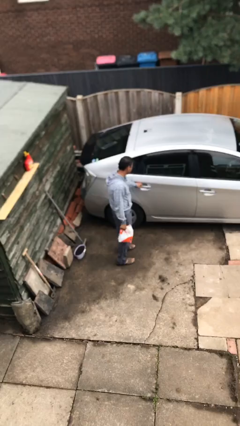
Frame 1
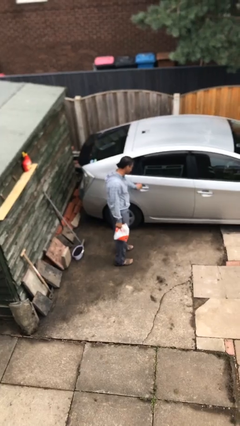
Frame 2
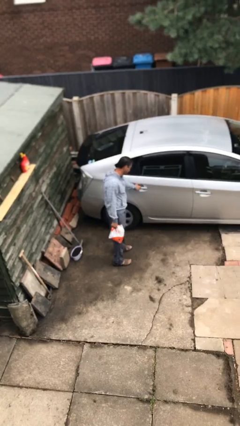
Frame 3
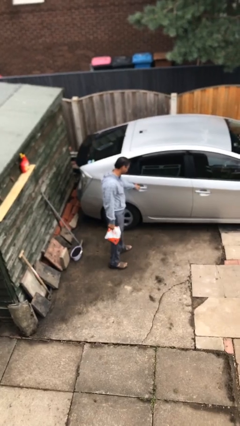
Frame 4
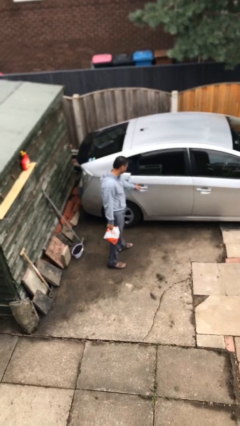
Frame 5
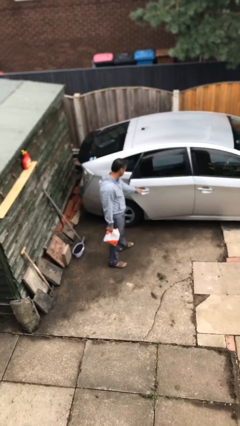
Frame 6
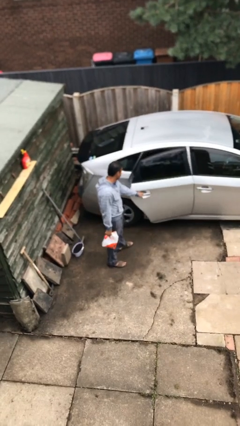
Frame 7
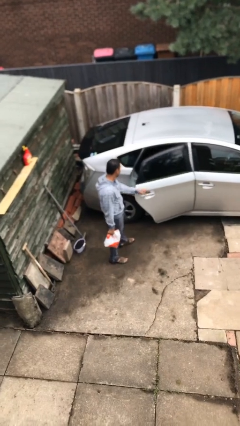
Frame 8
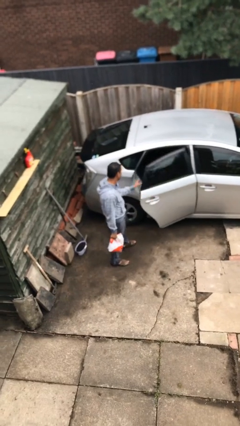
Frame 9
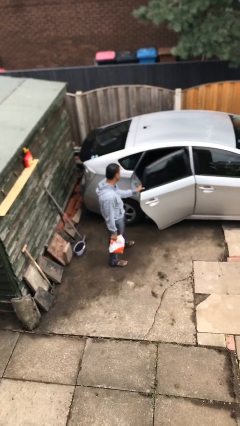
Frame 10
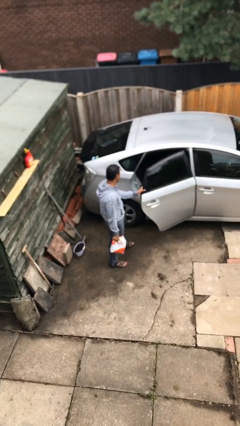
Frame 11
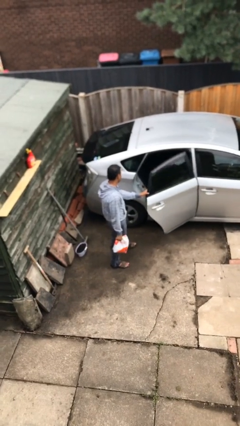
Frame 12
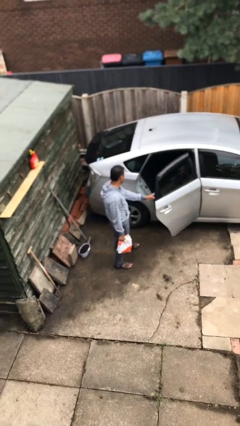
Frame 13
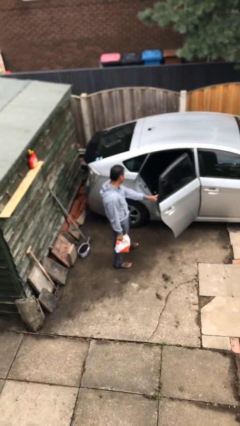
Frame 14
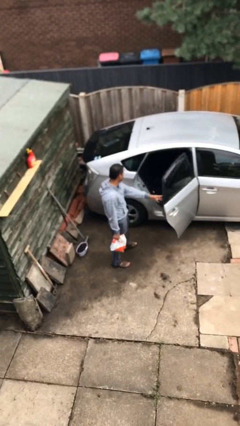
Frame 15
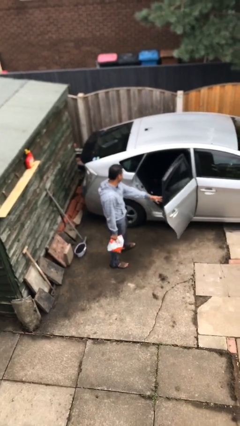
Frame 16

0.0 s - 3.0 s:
person opens car door

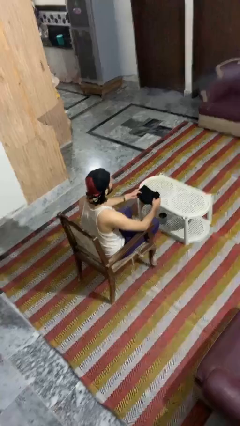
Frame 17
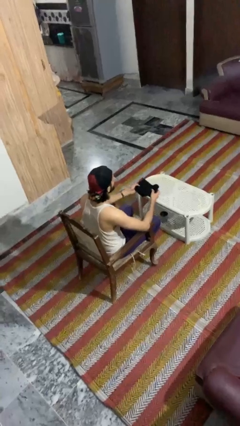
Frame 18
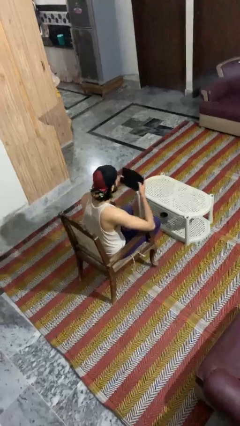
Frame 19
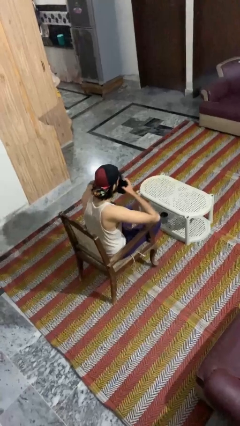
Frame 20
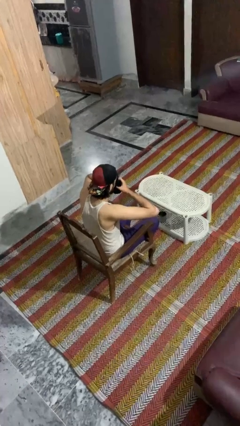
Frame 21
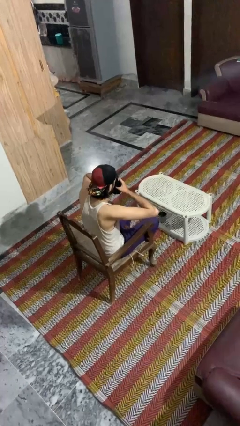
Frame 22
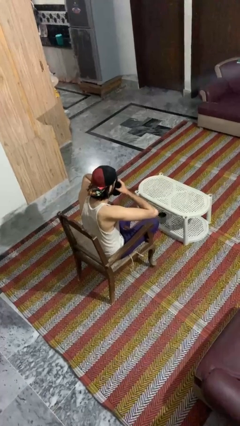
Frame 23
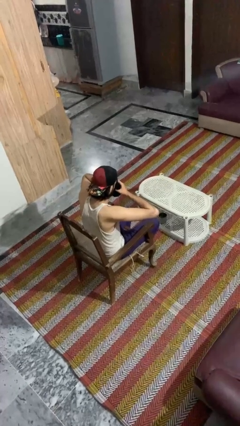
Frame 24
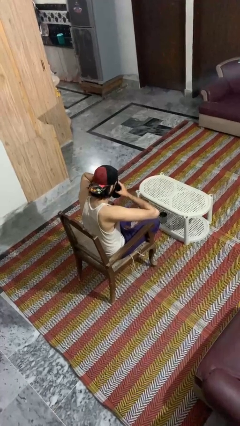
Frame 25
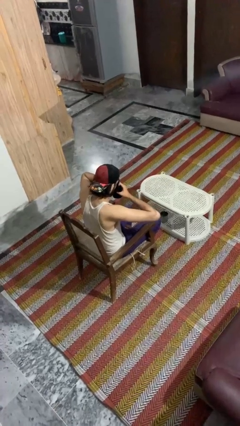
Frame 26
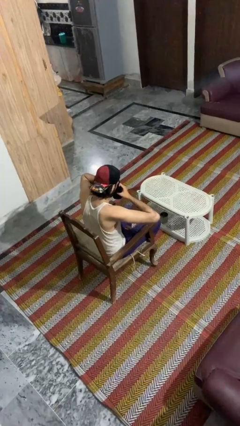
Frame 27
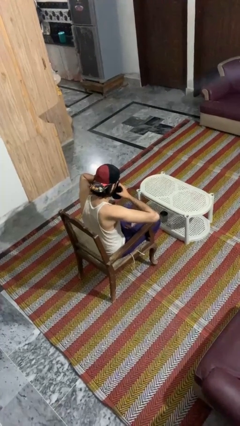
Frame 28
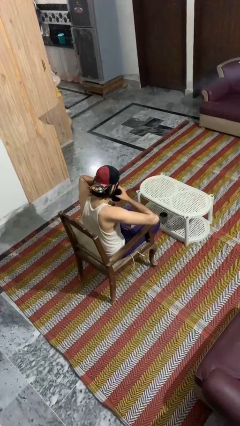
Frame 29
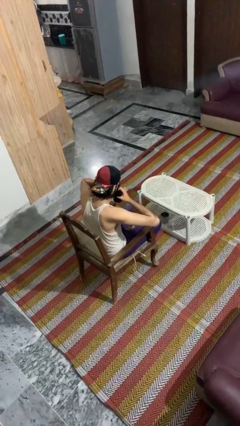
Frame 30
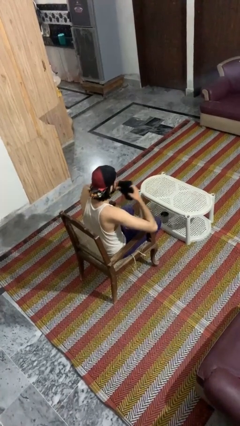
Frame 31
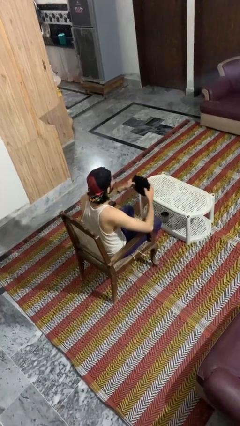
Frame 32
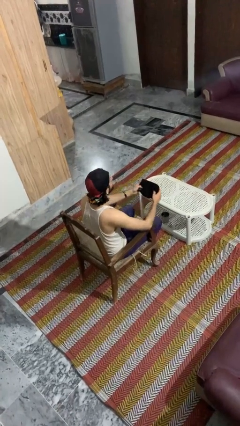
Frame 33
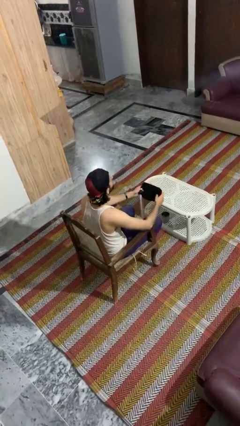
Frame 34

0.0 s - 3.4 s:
person blows nose

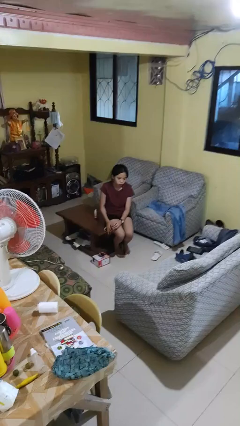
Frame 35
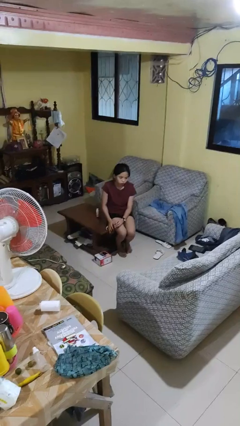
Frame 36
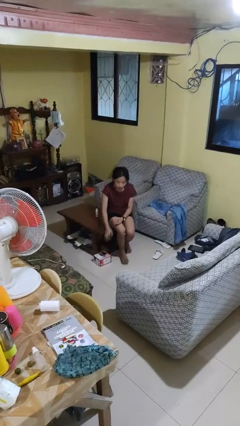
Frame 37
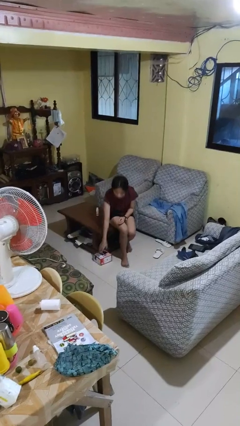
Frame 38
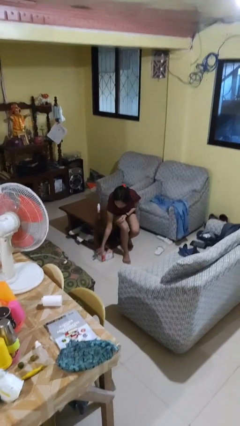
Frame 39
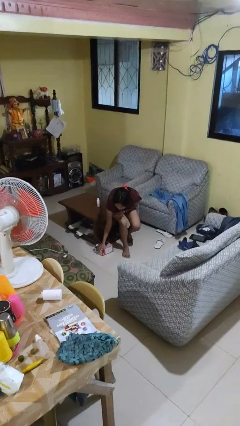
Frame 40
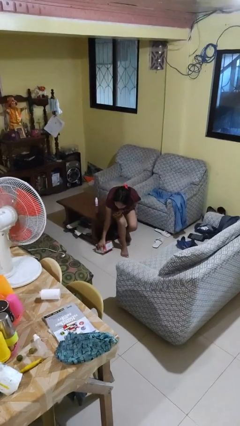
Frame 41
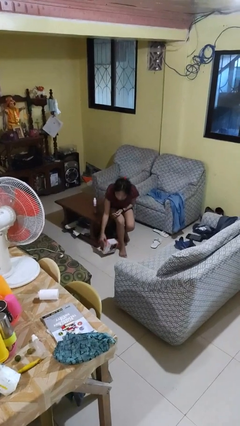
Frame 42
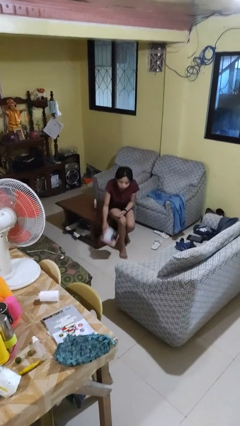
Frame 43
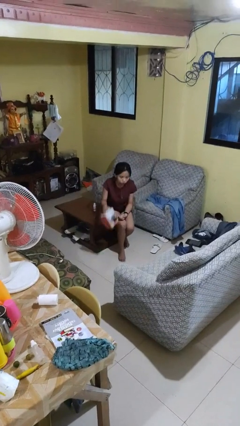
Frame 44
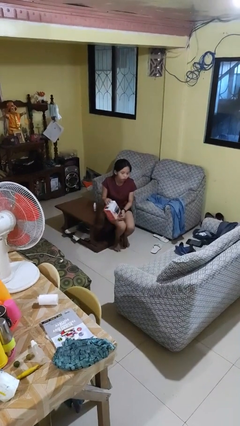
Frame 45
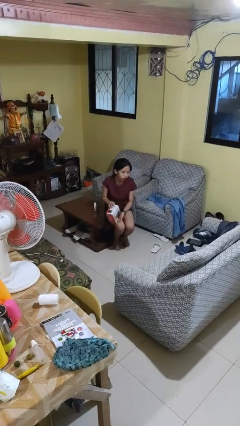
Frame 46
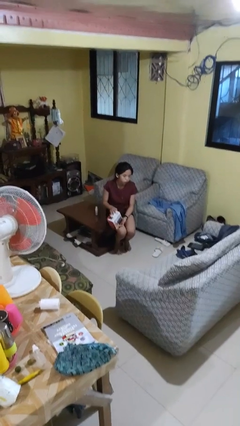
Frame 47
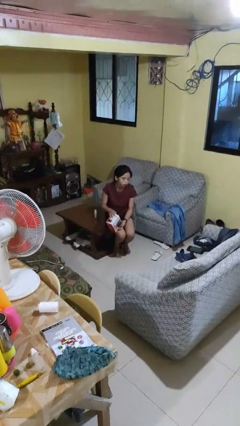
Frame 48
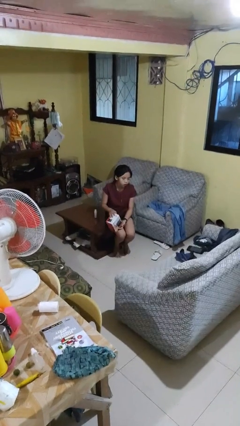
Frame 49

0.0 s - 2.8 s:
person picks up object from floor

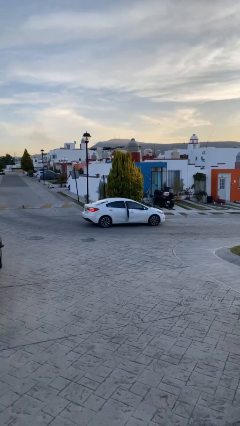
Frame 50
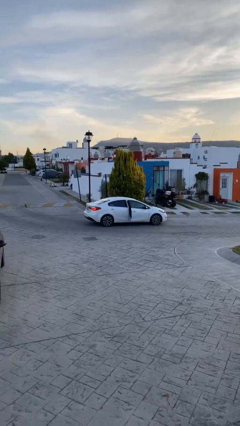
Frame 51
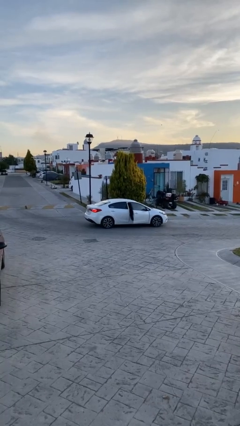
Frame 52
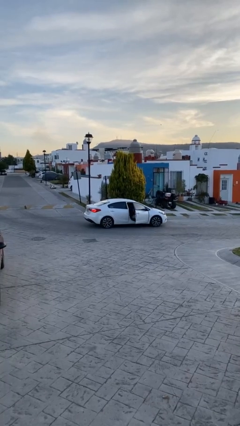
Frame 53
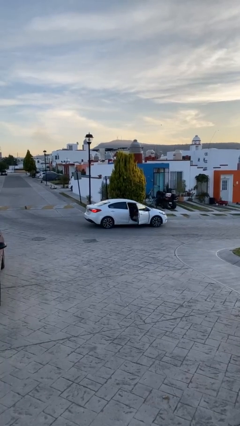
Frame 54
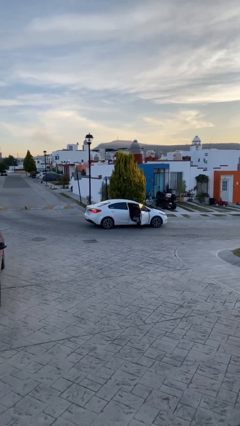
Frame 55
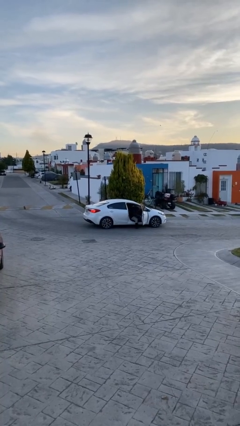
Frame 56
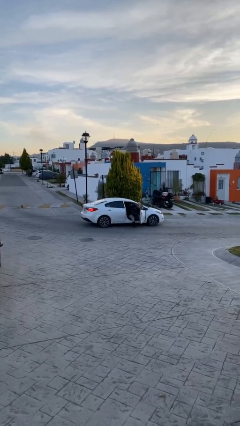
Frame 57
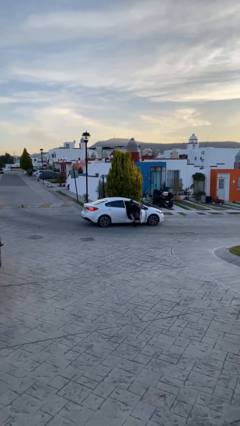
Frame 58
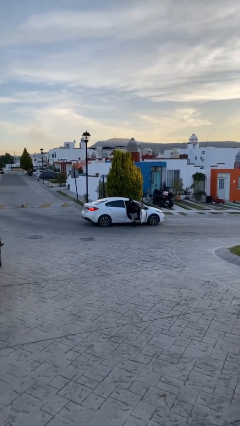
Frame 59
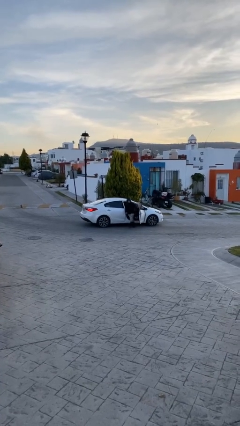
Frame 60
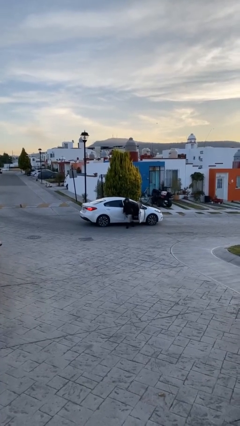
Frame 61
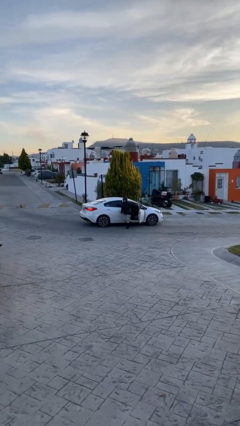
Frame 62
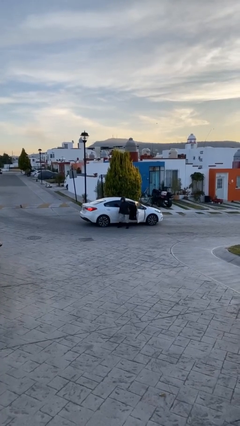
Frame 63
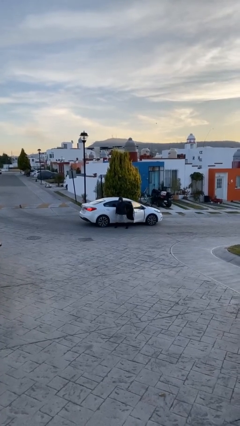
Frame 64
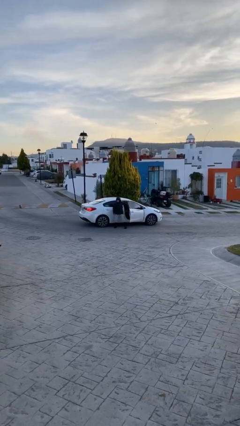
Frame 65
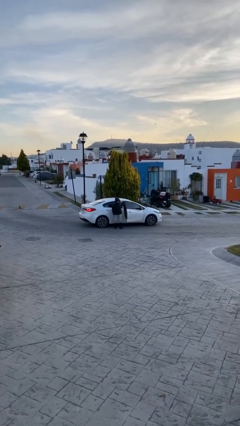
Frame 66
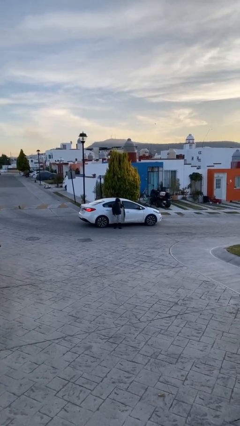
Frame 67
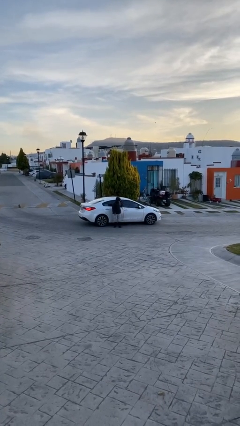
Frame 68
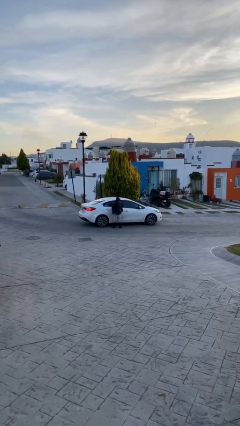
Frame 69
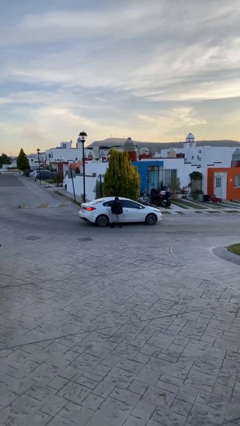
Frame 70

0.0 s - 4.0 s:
car drops off person

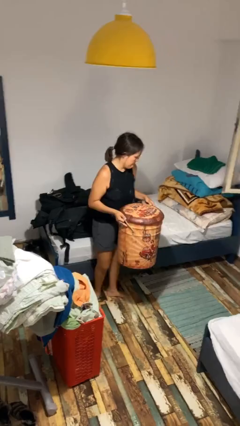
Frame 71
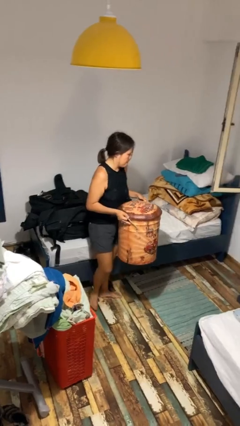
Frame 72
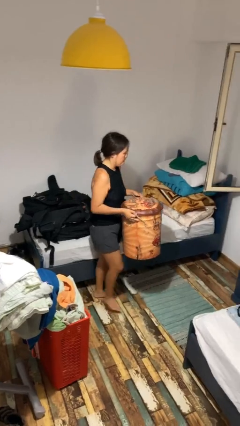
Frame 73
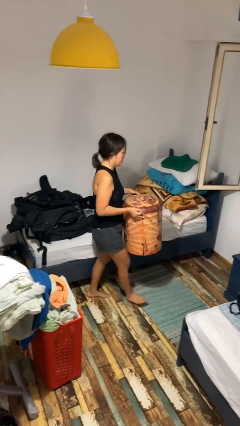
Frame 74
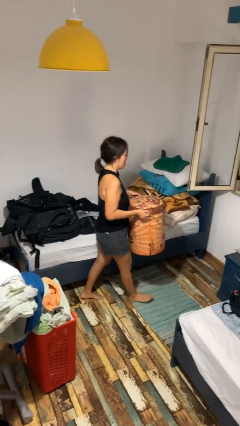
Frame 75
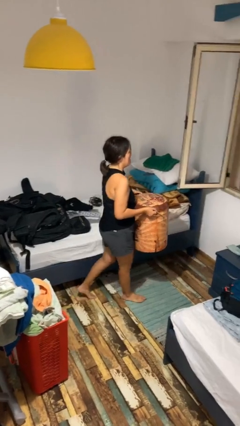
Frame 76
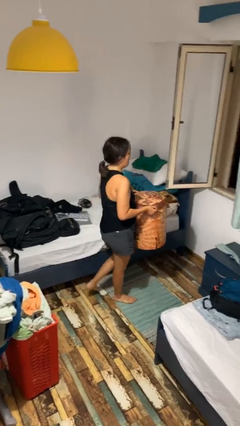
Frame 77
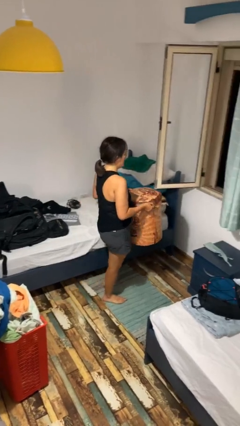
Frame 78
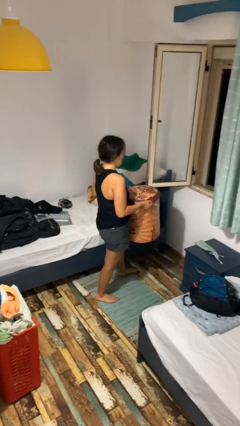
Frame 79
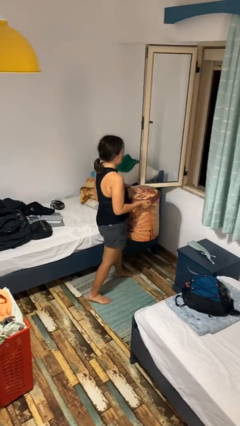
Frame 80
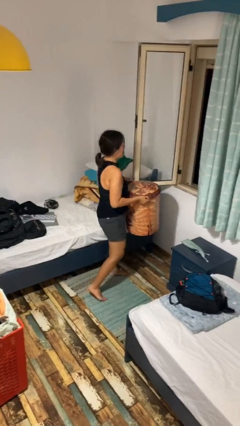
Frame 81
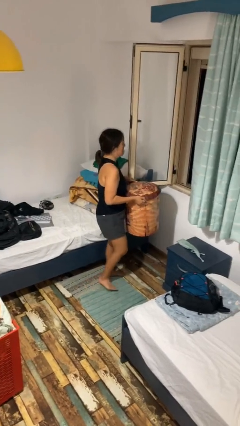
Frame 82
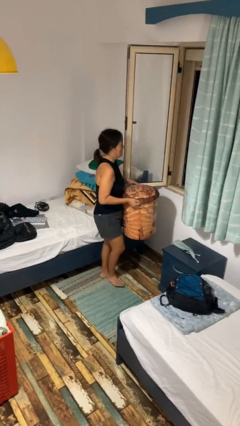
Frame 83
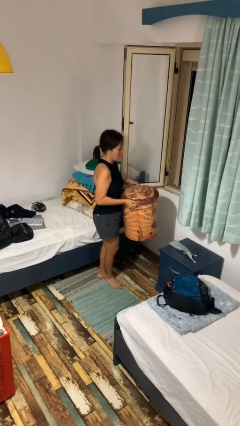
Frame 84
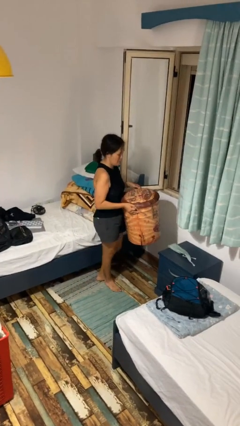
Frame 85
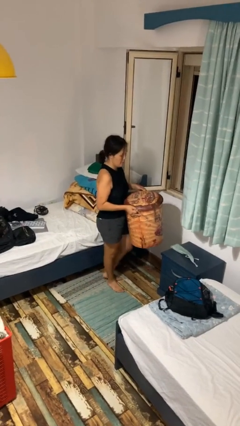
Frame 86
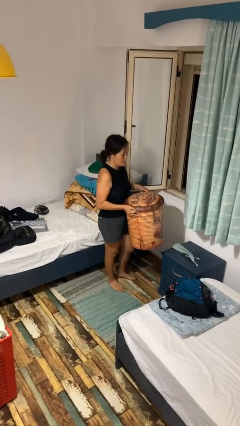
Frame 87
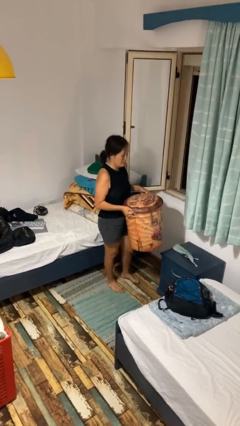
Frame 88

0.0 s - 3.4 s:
person carries furniture

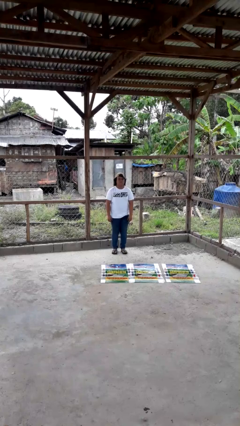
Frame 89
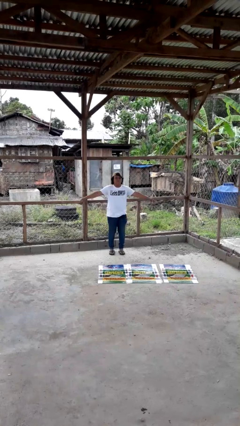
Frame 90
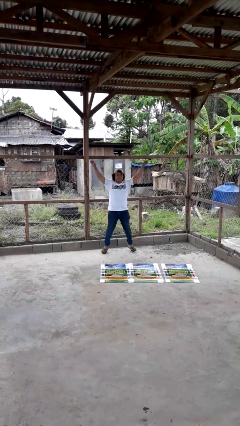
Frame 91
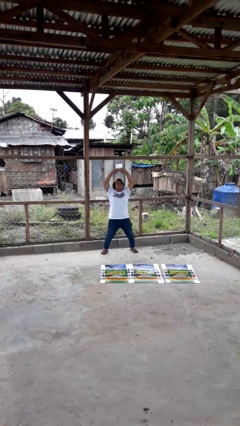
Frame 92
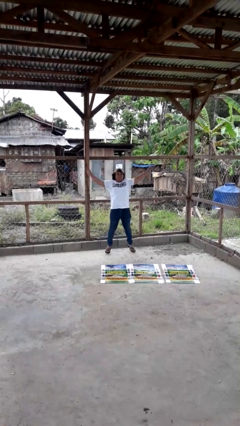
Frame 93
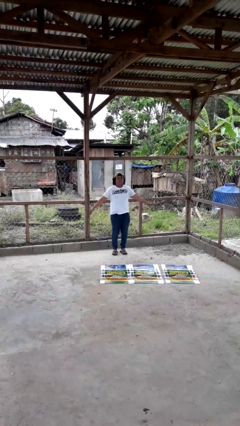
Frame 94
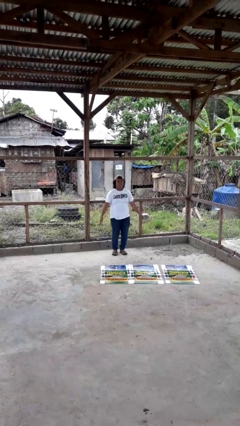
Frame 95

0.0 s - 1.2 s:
person exercises with jumping jacks
